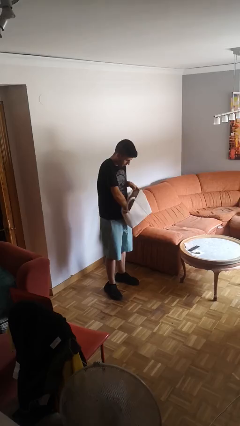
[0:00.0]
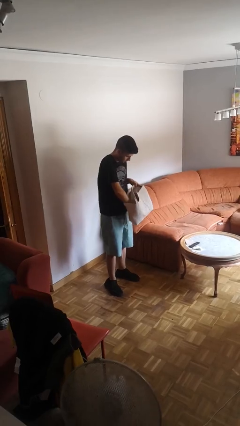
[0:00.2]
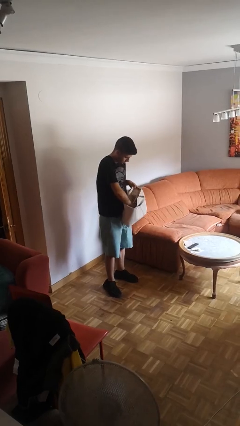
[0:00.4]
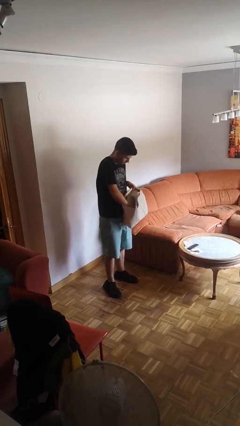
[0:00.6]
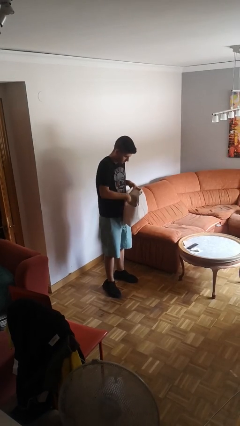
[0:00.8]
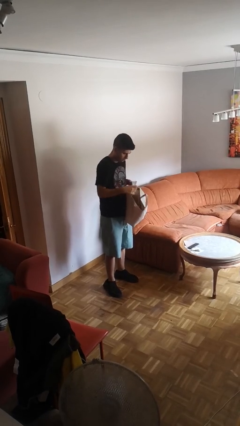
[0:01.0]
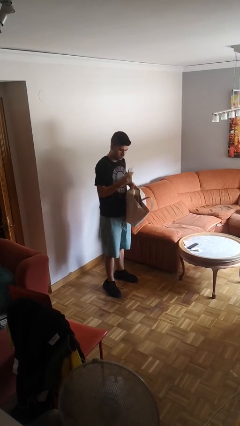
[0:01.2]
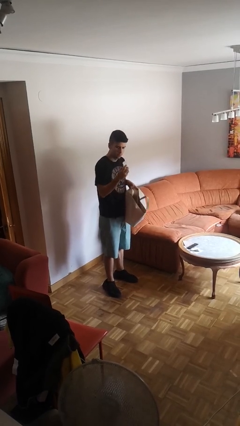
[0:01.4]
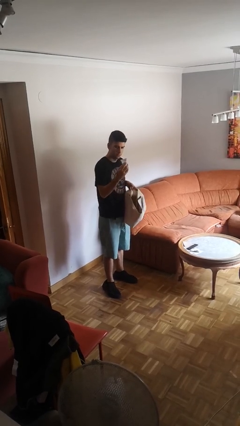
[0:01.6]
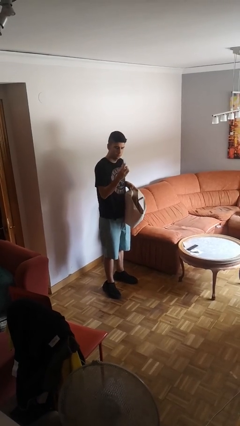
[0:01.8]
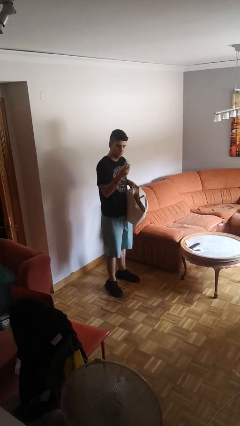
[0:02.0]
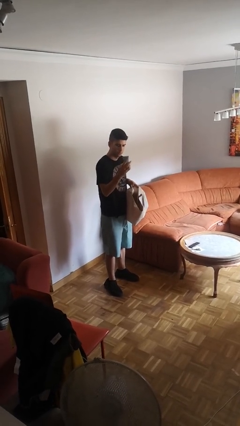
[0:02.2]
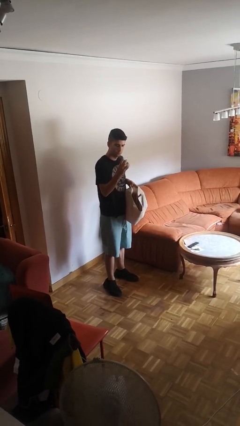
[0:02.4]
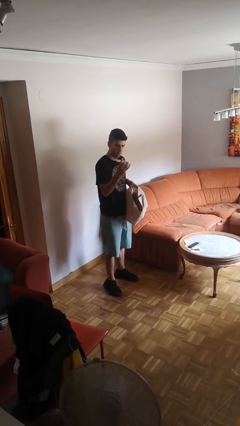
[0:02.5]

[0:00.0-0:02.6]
person takes object from purse

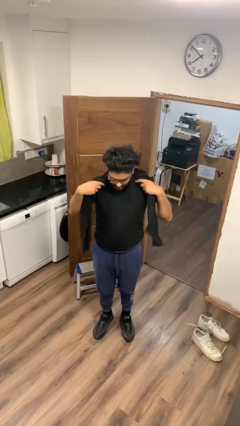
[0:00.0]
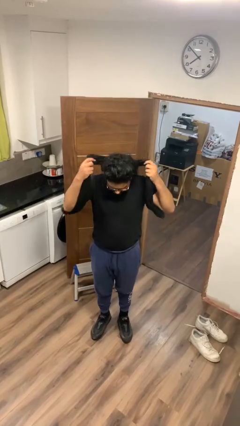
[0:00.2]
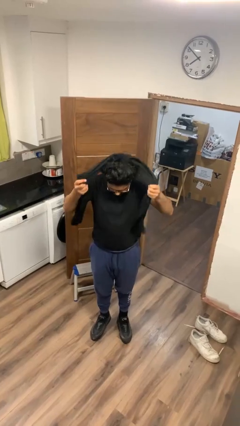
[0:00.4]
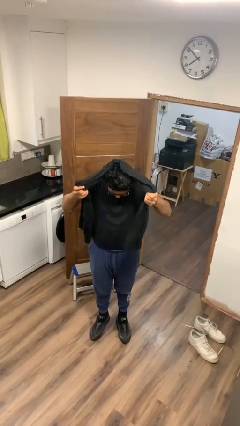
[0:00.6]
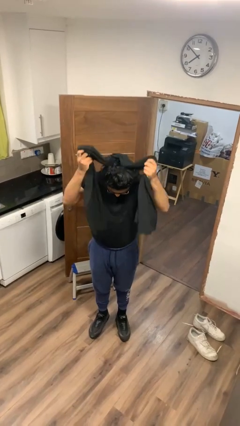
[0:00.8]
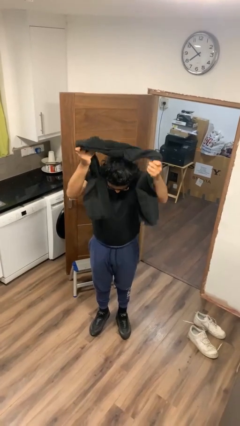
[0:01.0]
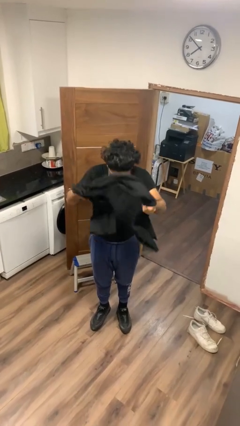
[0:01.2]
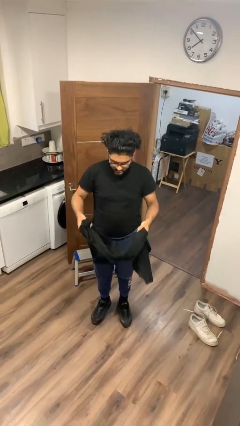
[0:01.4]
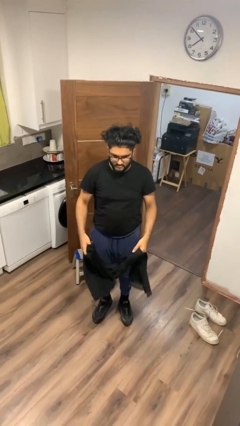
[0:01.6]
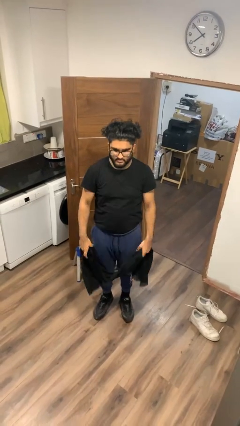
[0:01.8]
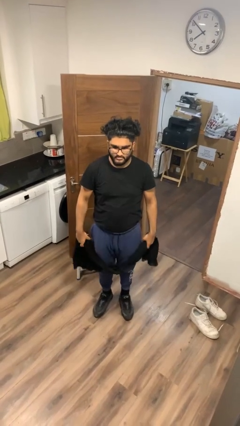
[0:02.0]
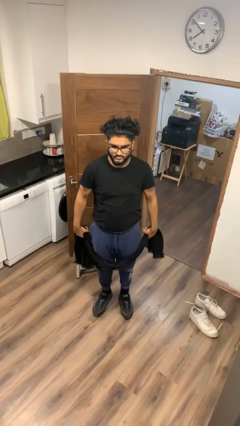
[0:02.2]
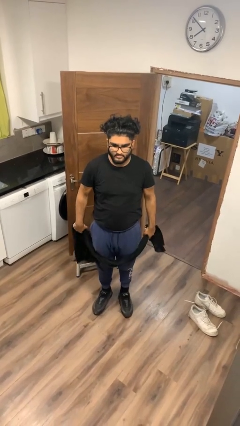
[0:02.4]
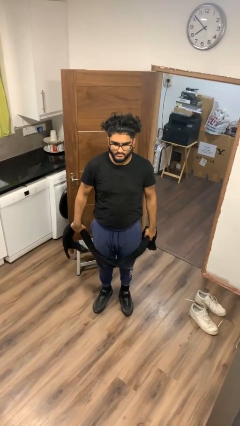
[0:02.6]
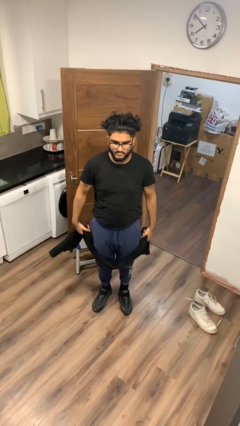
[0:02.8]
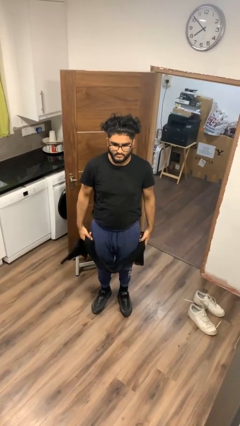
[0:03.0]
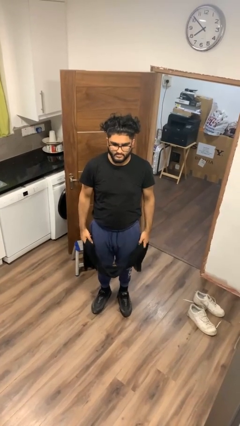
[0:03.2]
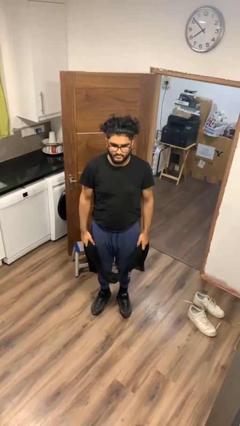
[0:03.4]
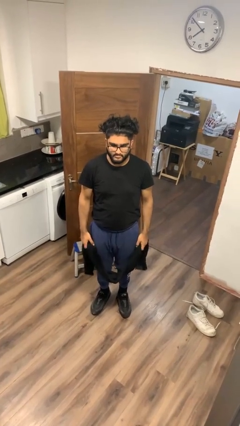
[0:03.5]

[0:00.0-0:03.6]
person takes off scarf

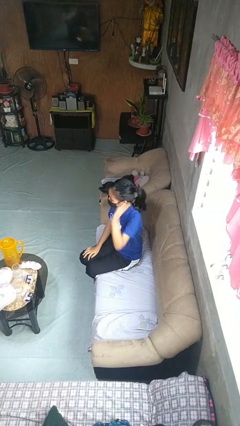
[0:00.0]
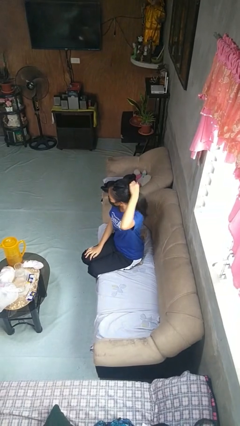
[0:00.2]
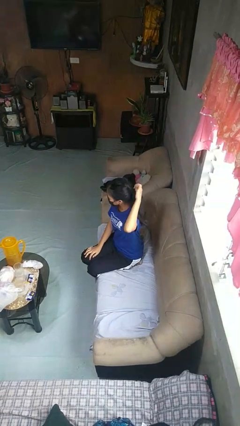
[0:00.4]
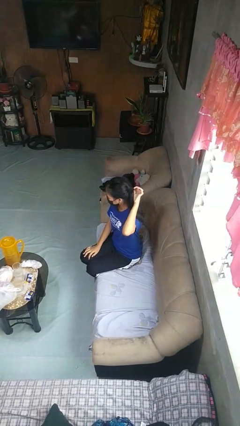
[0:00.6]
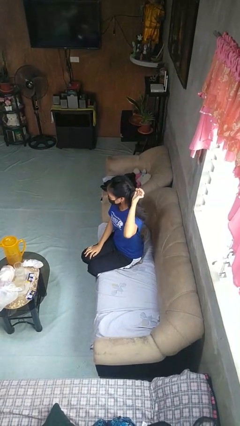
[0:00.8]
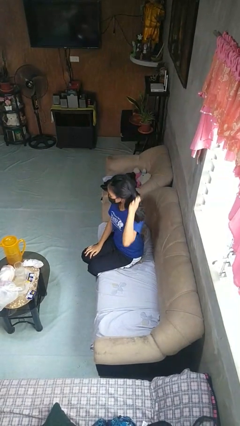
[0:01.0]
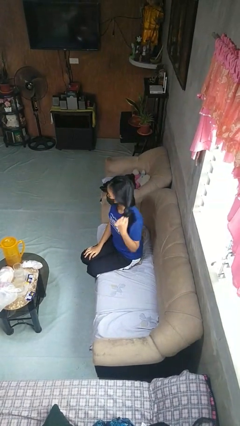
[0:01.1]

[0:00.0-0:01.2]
person takes off hairtie

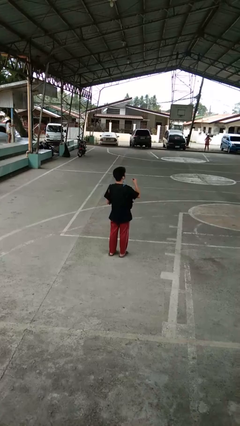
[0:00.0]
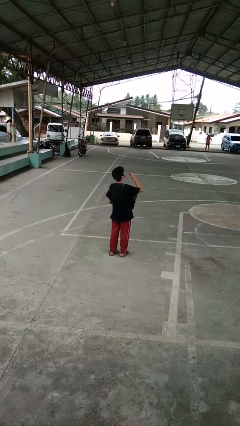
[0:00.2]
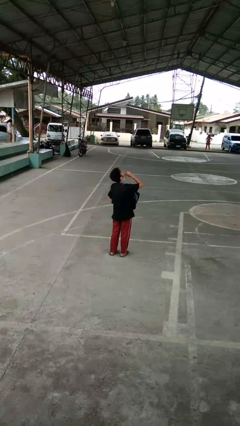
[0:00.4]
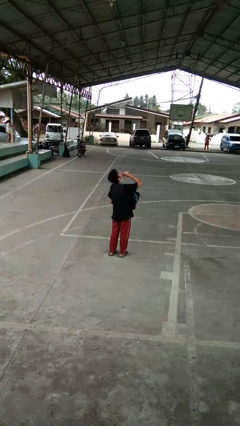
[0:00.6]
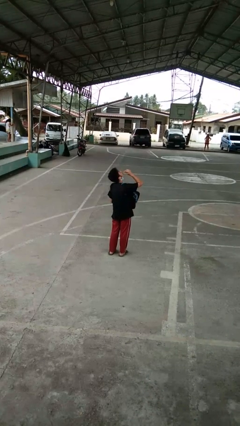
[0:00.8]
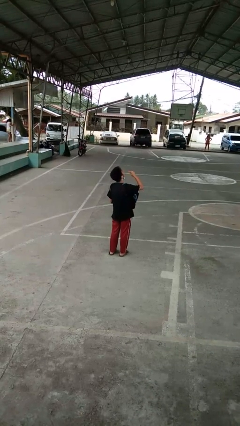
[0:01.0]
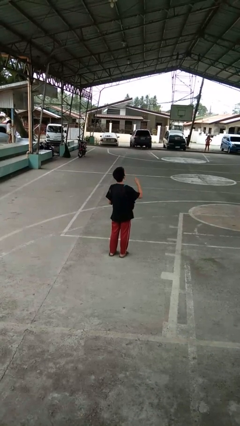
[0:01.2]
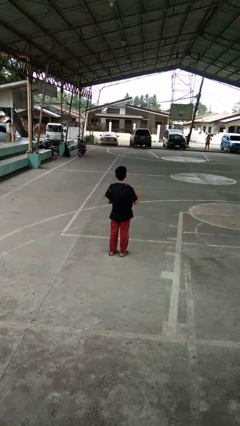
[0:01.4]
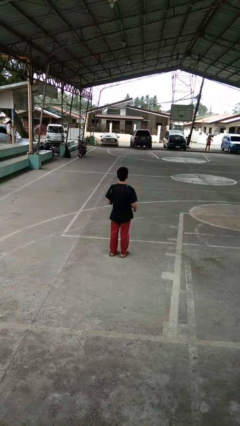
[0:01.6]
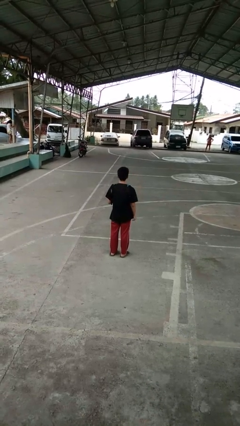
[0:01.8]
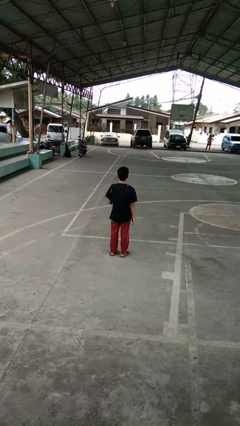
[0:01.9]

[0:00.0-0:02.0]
person eats snack from bag

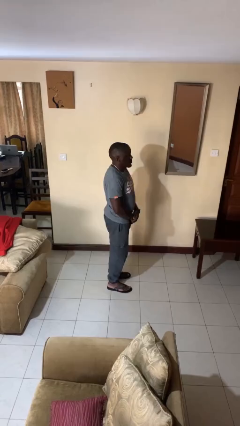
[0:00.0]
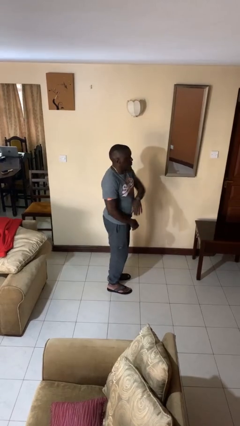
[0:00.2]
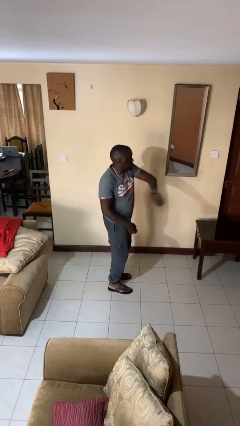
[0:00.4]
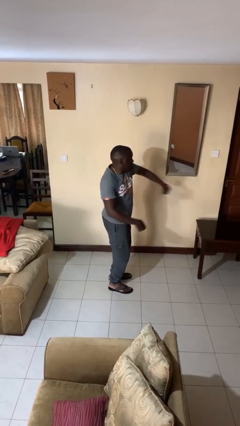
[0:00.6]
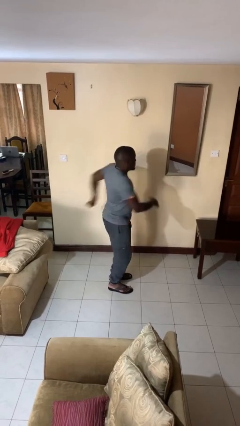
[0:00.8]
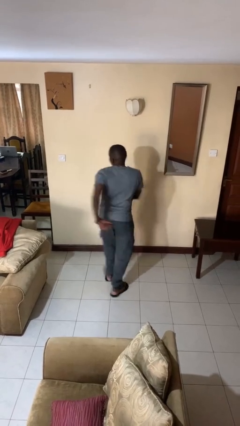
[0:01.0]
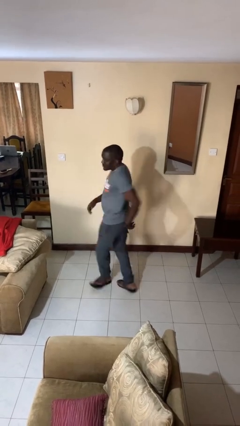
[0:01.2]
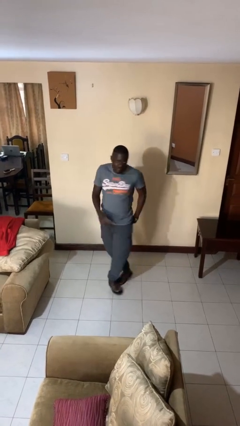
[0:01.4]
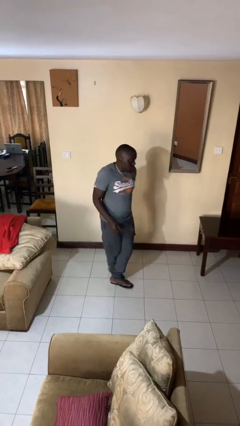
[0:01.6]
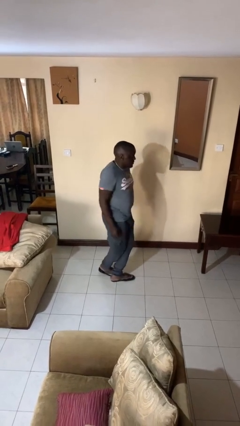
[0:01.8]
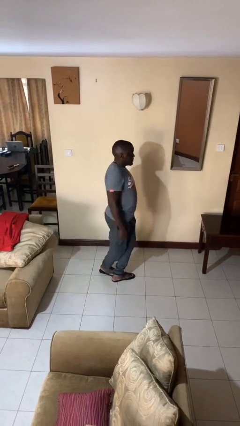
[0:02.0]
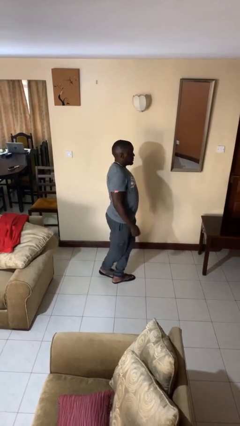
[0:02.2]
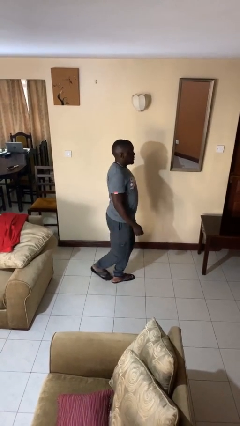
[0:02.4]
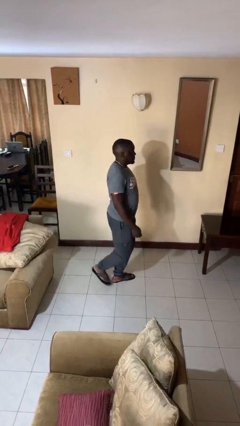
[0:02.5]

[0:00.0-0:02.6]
person twirls

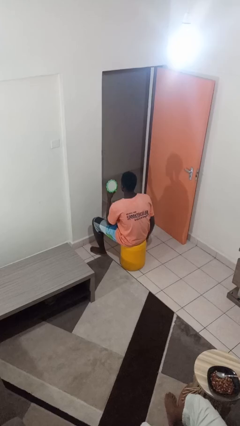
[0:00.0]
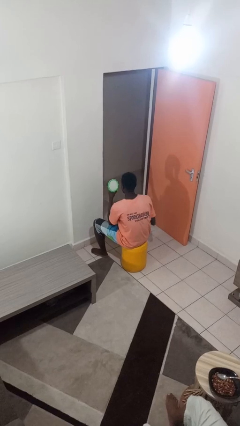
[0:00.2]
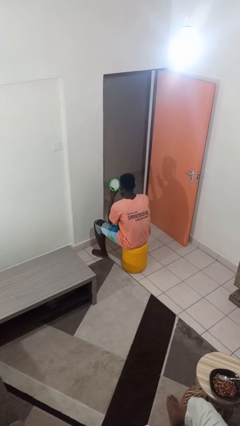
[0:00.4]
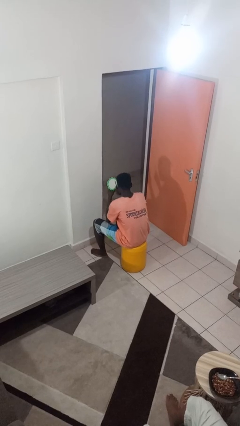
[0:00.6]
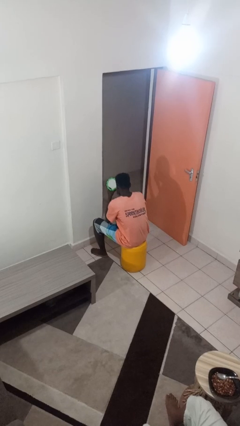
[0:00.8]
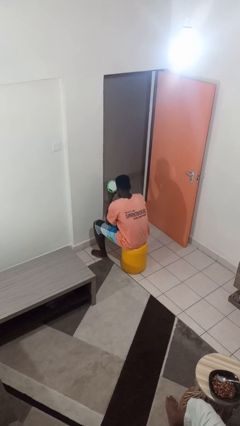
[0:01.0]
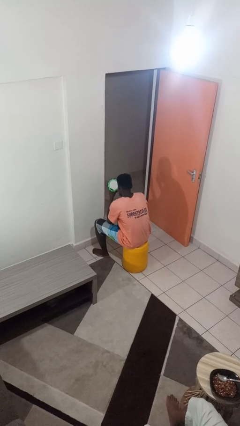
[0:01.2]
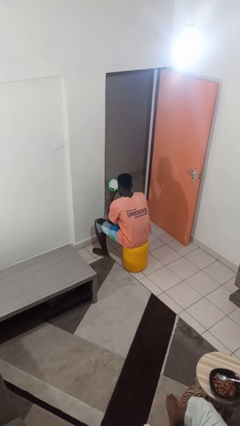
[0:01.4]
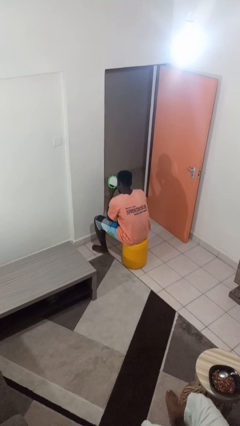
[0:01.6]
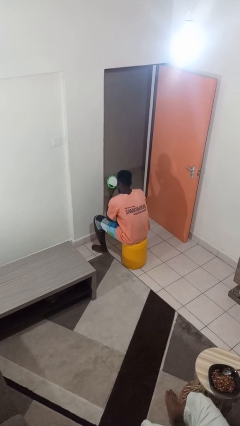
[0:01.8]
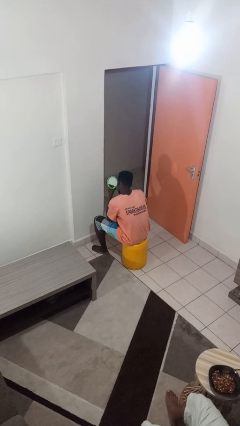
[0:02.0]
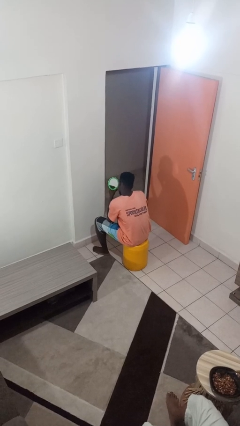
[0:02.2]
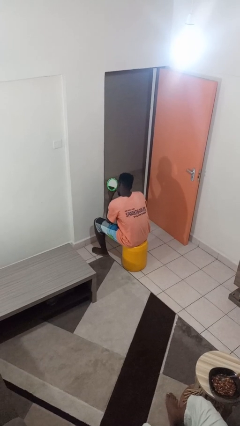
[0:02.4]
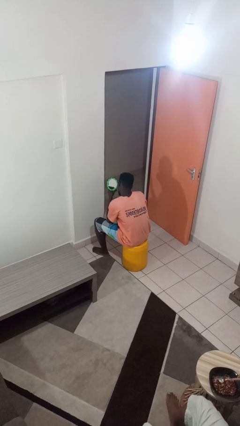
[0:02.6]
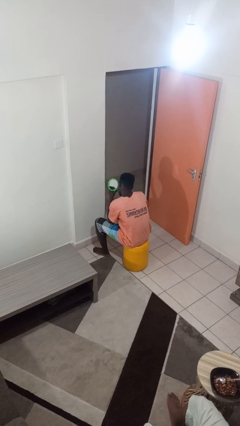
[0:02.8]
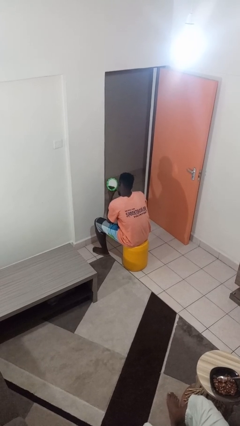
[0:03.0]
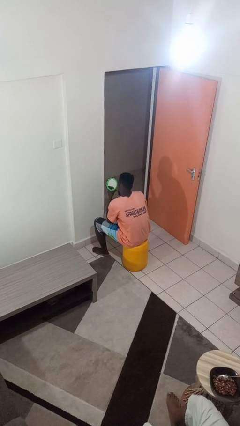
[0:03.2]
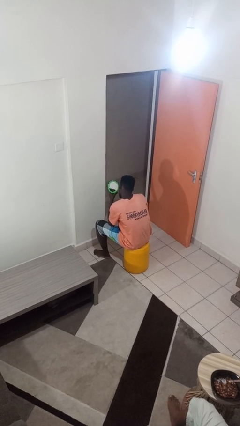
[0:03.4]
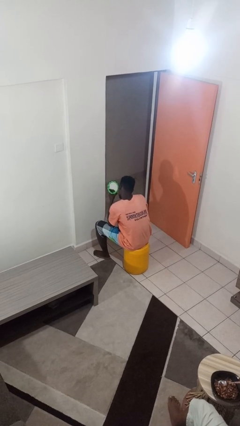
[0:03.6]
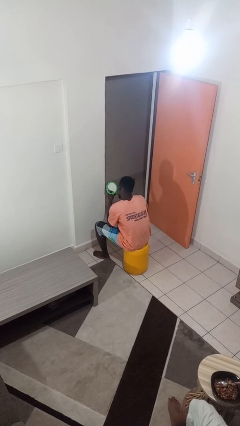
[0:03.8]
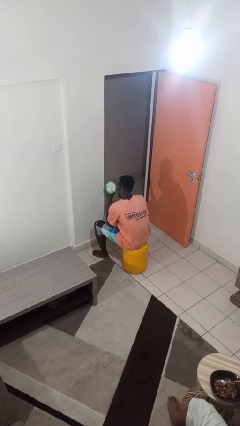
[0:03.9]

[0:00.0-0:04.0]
person applies eye makeup

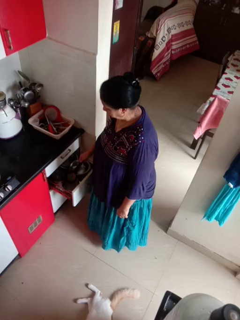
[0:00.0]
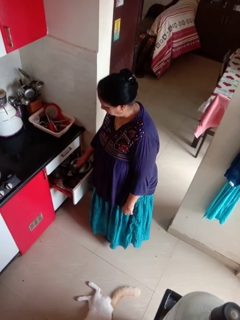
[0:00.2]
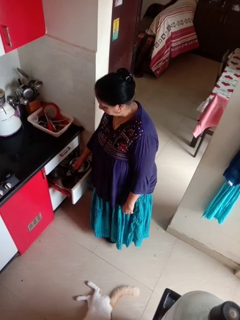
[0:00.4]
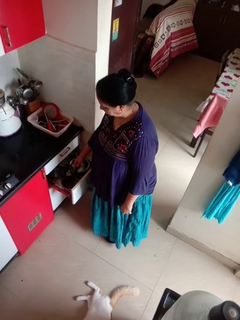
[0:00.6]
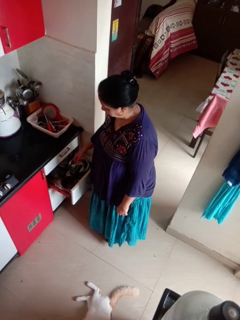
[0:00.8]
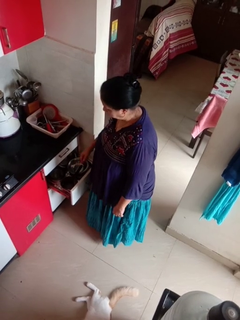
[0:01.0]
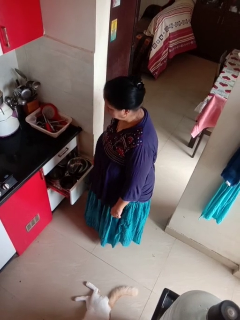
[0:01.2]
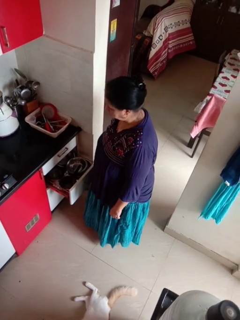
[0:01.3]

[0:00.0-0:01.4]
person puts object into kitchen drawer
